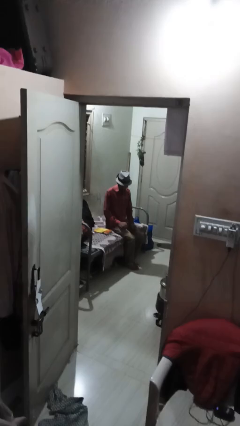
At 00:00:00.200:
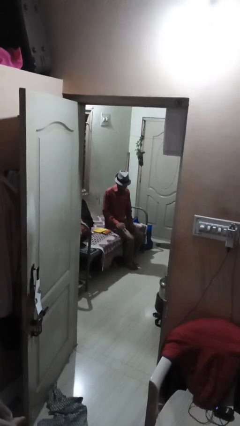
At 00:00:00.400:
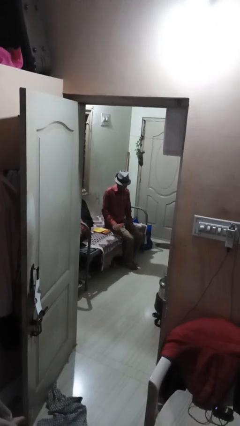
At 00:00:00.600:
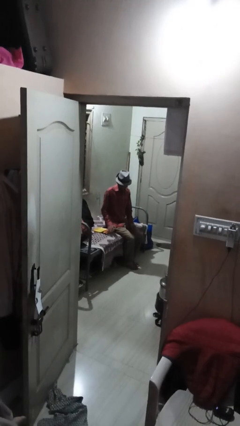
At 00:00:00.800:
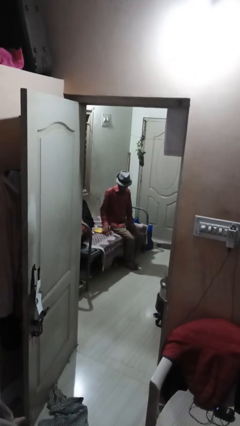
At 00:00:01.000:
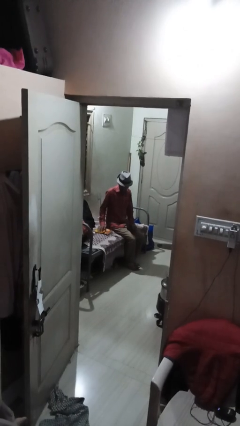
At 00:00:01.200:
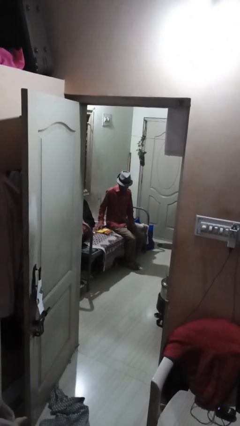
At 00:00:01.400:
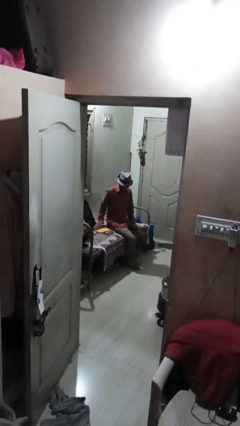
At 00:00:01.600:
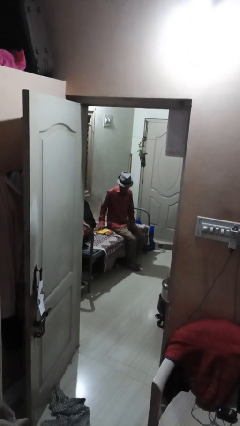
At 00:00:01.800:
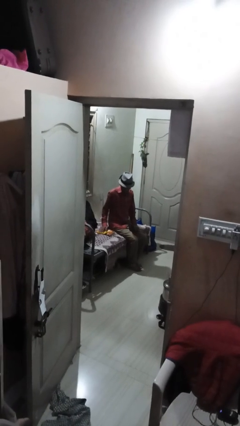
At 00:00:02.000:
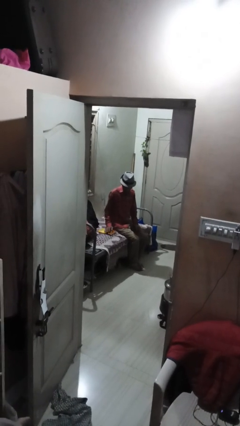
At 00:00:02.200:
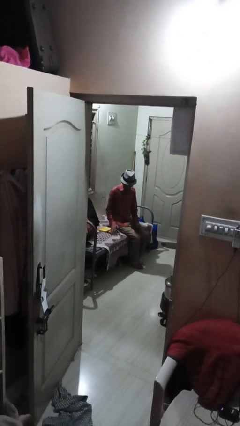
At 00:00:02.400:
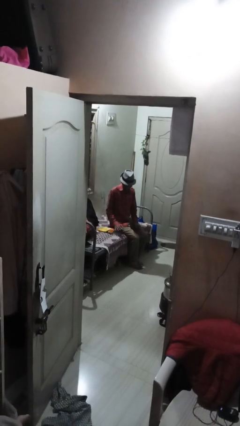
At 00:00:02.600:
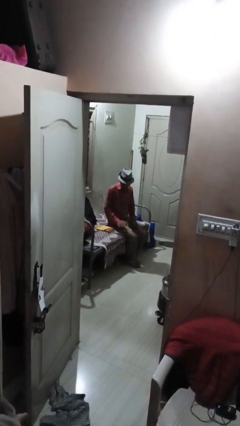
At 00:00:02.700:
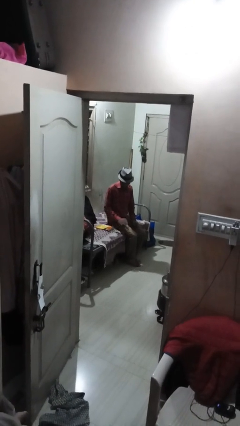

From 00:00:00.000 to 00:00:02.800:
person waves hand over object

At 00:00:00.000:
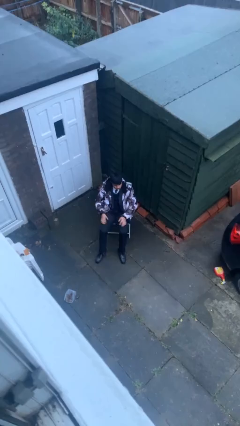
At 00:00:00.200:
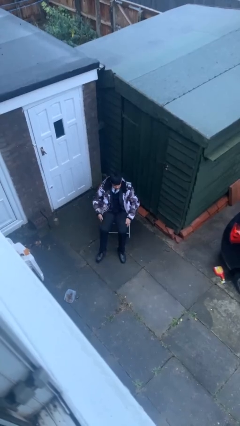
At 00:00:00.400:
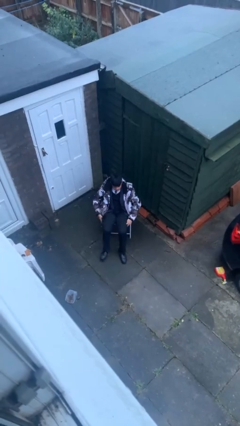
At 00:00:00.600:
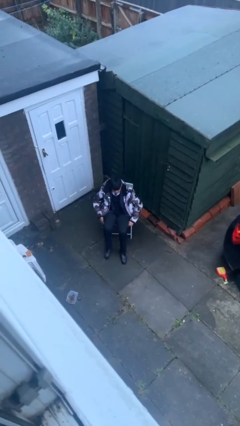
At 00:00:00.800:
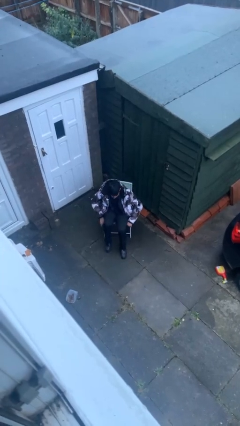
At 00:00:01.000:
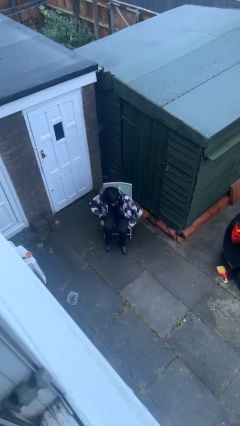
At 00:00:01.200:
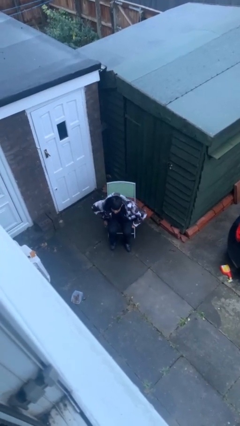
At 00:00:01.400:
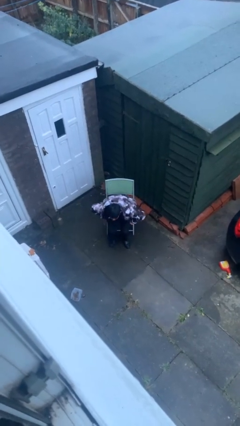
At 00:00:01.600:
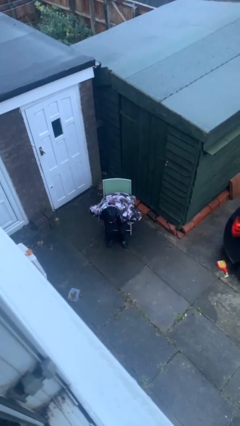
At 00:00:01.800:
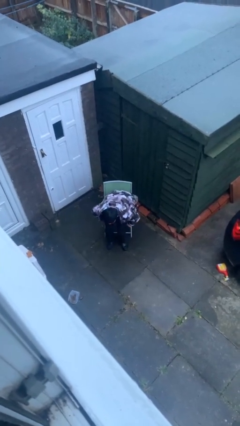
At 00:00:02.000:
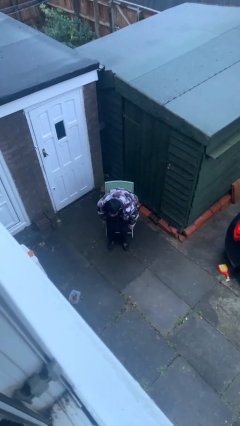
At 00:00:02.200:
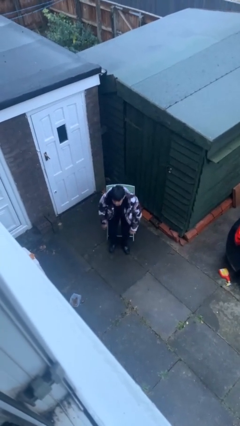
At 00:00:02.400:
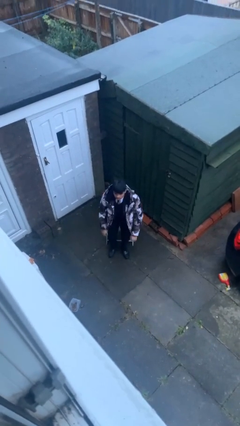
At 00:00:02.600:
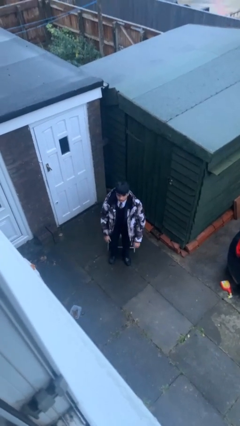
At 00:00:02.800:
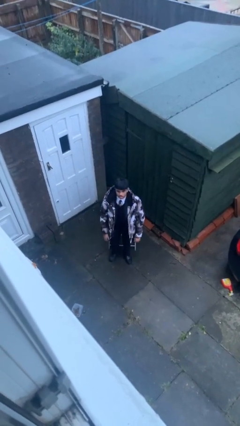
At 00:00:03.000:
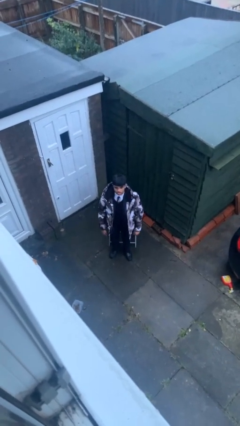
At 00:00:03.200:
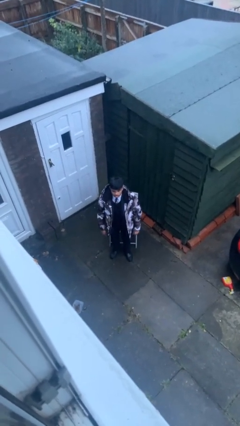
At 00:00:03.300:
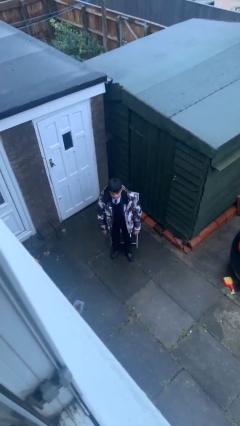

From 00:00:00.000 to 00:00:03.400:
person stands up

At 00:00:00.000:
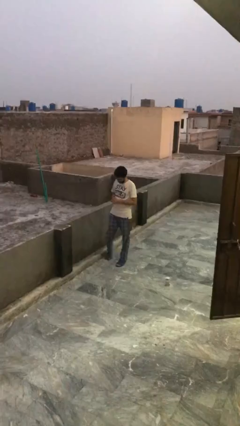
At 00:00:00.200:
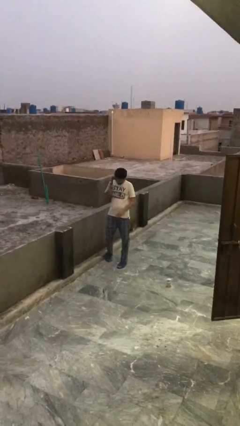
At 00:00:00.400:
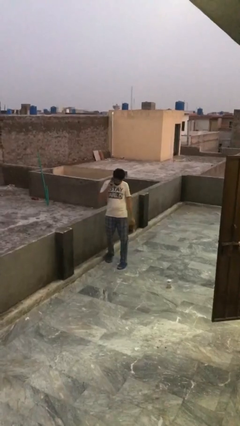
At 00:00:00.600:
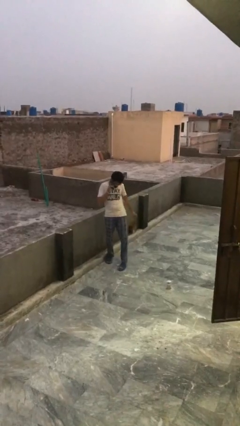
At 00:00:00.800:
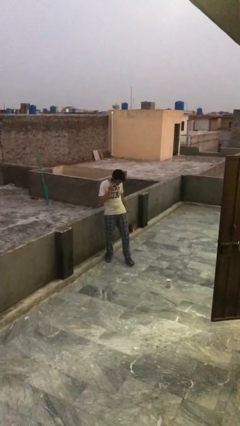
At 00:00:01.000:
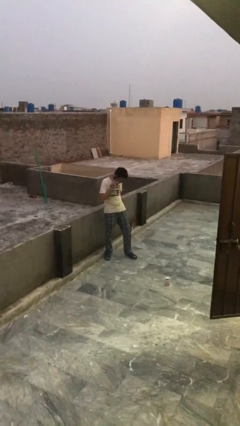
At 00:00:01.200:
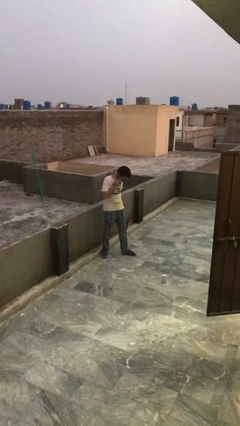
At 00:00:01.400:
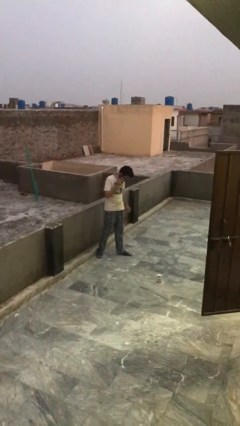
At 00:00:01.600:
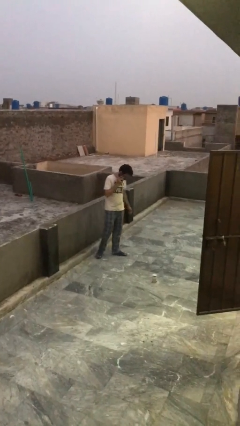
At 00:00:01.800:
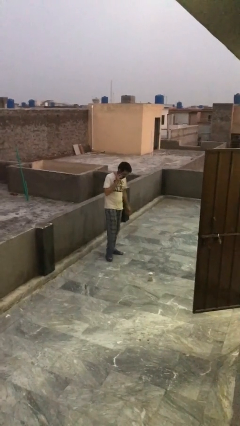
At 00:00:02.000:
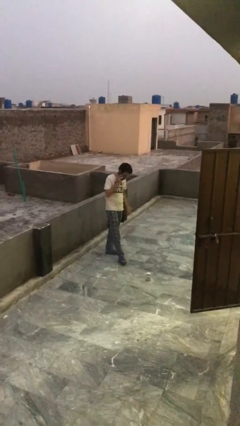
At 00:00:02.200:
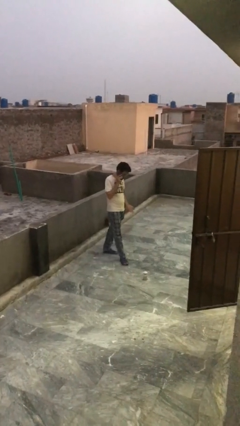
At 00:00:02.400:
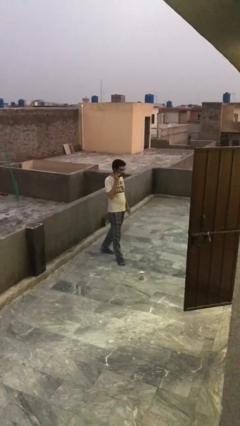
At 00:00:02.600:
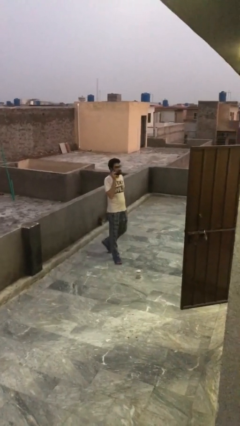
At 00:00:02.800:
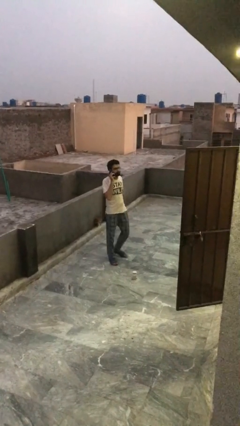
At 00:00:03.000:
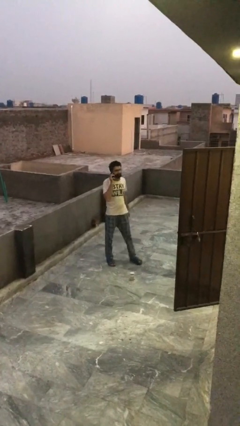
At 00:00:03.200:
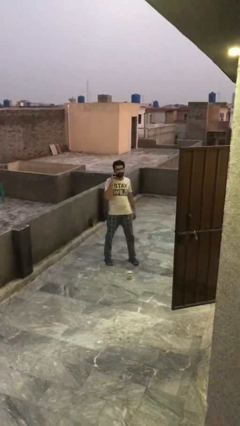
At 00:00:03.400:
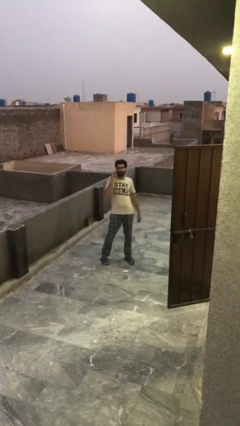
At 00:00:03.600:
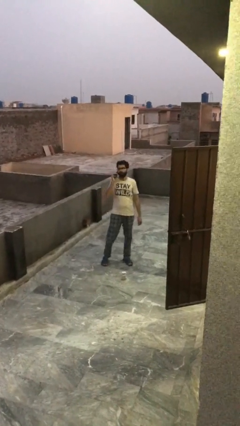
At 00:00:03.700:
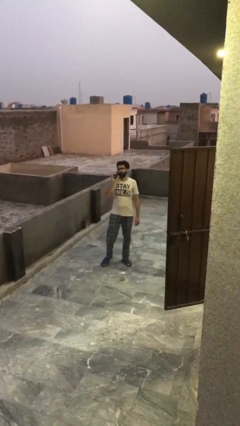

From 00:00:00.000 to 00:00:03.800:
person talks on phone

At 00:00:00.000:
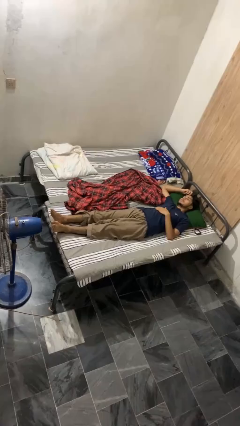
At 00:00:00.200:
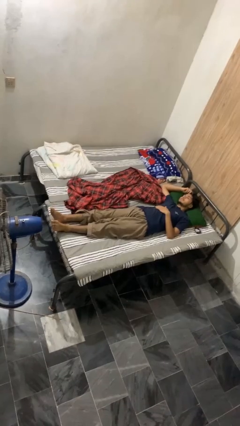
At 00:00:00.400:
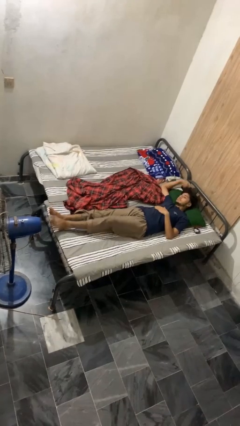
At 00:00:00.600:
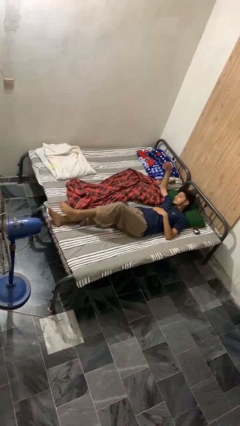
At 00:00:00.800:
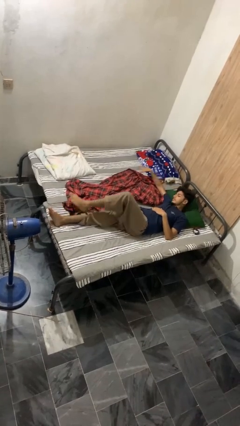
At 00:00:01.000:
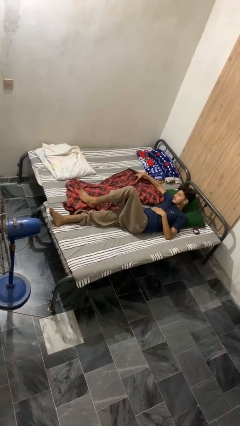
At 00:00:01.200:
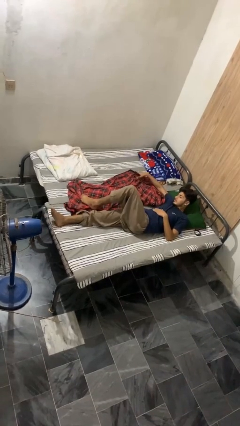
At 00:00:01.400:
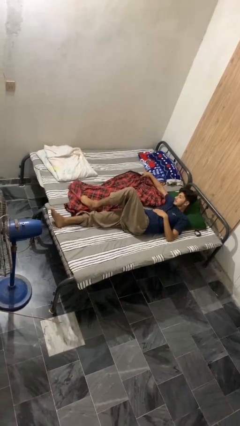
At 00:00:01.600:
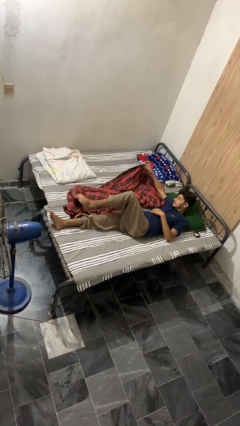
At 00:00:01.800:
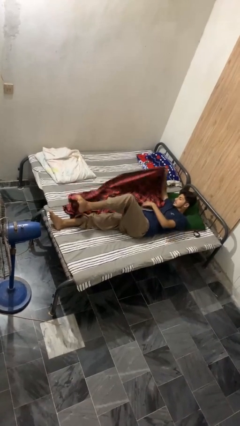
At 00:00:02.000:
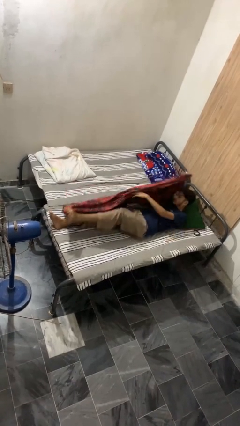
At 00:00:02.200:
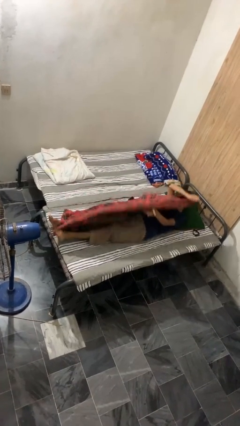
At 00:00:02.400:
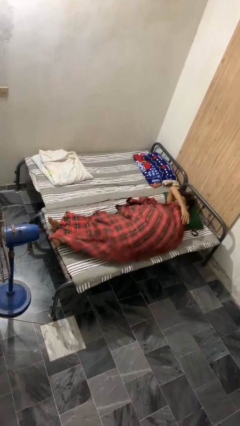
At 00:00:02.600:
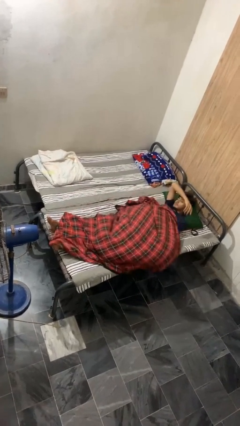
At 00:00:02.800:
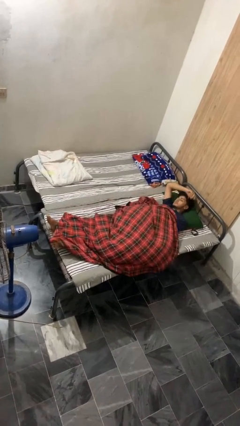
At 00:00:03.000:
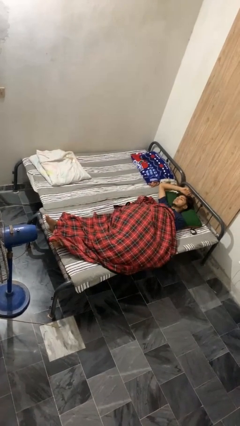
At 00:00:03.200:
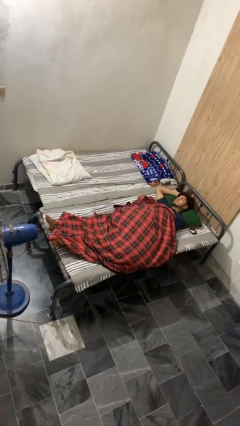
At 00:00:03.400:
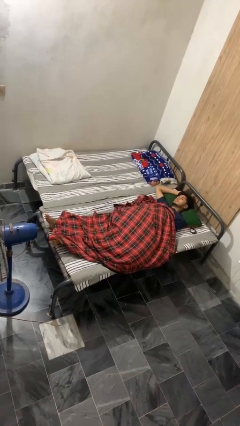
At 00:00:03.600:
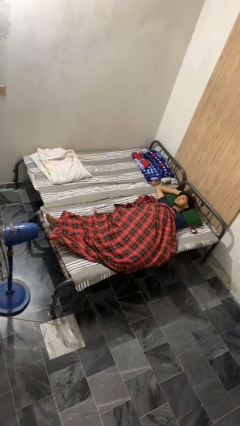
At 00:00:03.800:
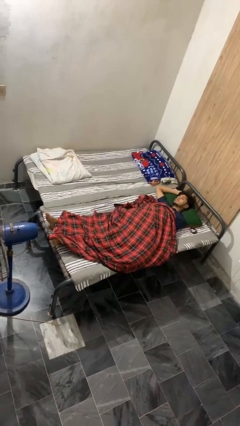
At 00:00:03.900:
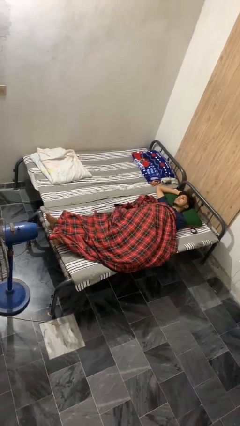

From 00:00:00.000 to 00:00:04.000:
person covers with bedsheets

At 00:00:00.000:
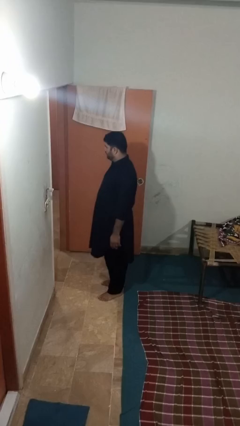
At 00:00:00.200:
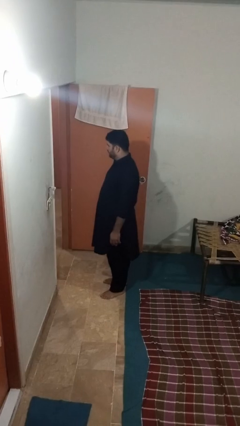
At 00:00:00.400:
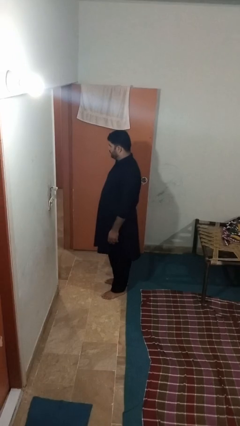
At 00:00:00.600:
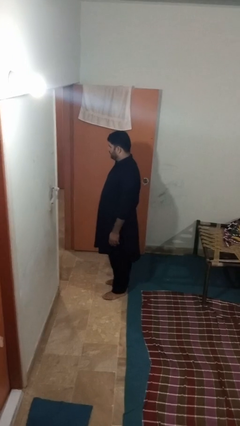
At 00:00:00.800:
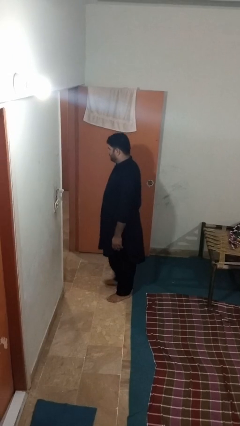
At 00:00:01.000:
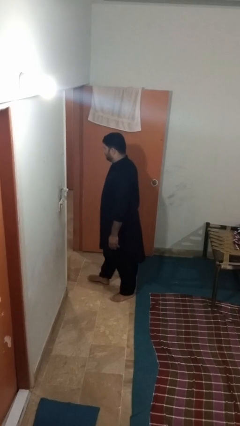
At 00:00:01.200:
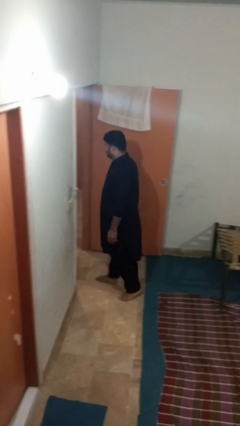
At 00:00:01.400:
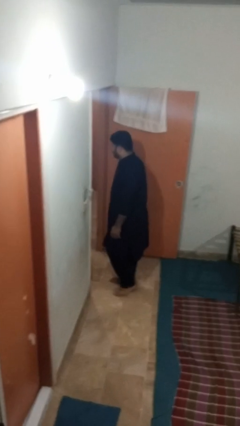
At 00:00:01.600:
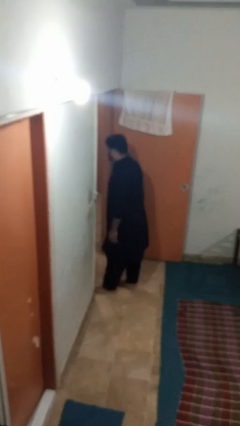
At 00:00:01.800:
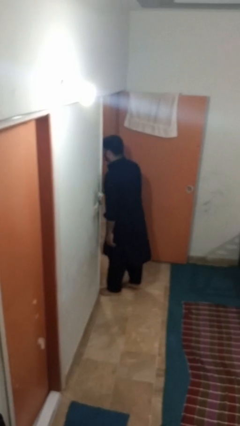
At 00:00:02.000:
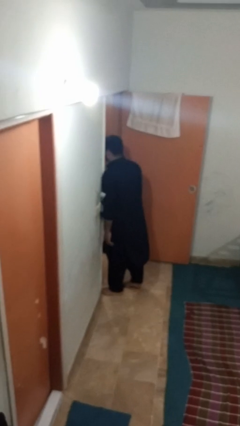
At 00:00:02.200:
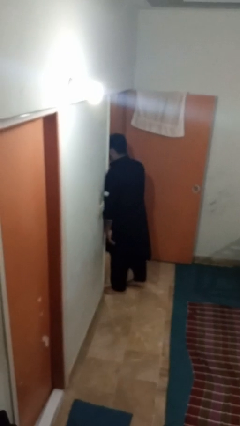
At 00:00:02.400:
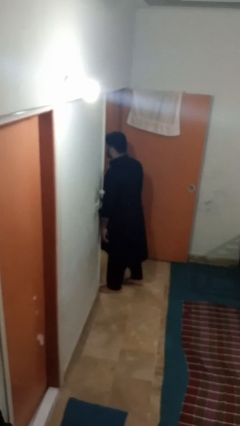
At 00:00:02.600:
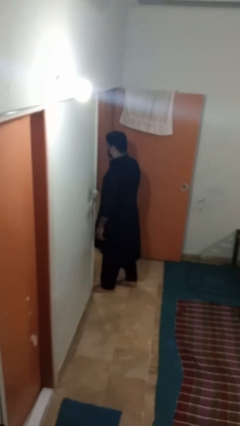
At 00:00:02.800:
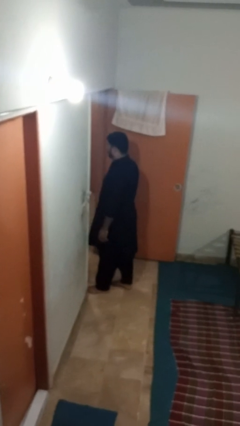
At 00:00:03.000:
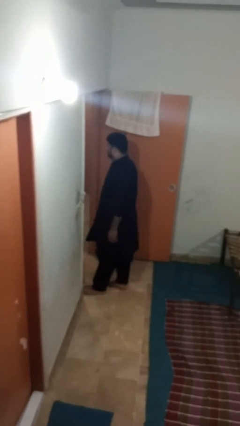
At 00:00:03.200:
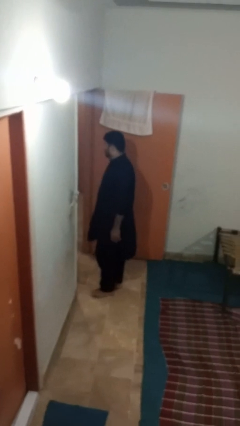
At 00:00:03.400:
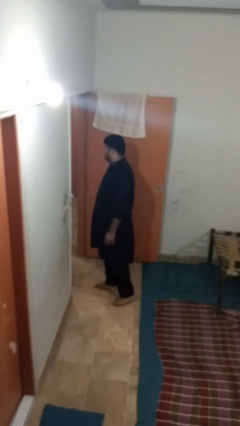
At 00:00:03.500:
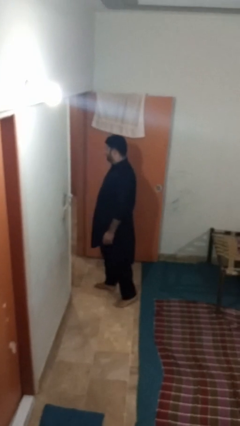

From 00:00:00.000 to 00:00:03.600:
person bumps into wall
